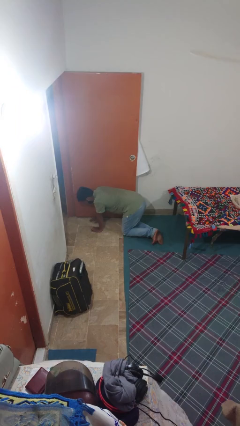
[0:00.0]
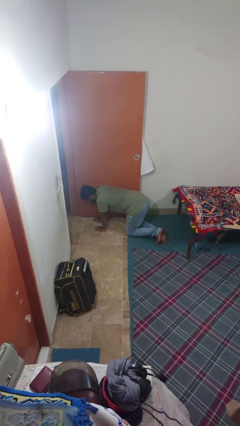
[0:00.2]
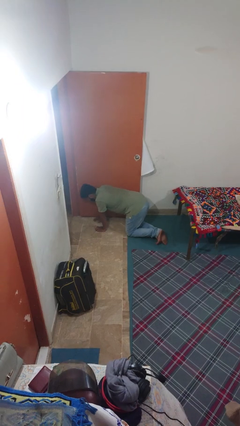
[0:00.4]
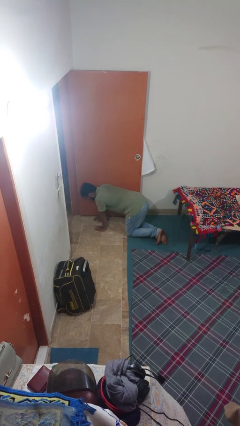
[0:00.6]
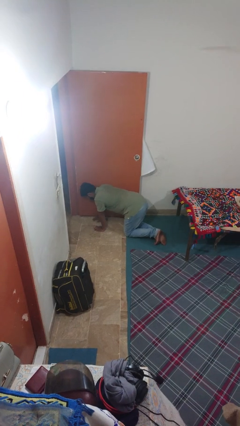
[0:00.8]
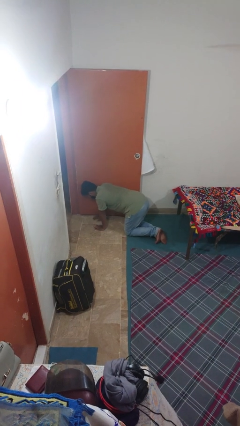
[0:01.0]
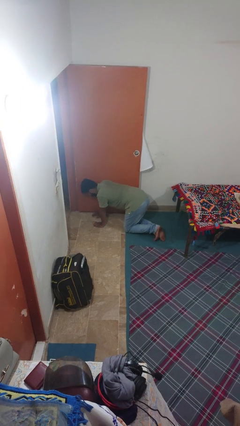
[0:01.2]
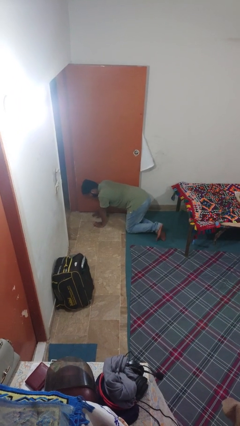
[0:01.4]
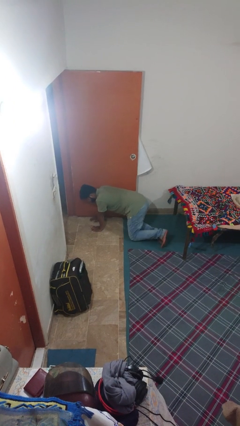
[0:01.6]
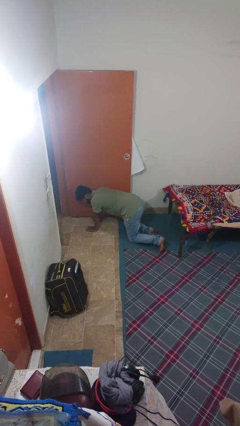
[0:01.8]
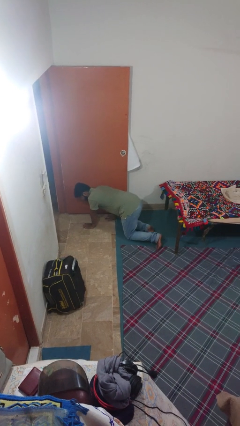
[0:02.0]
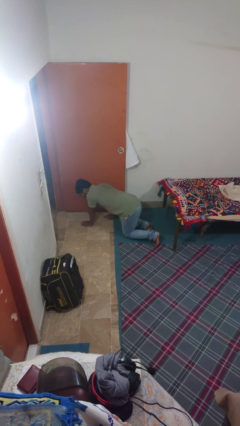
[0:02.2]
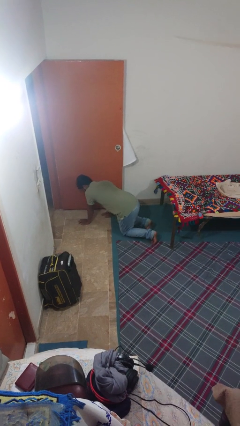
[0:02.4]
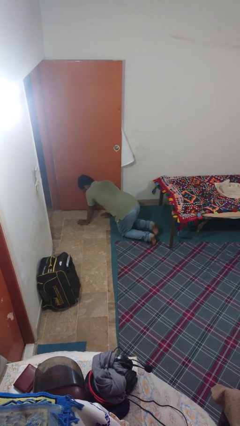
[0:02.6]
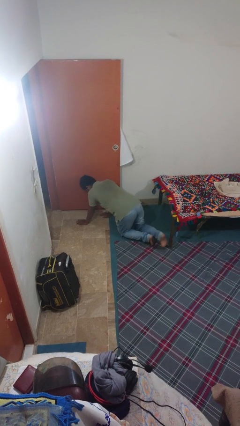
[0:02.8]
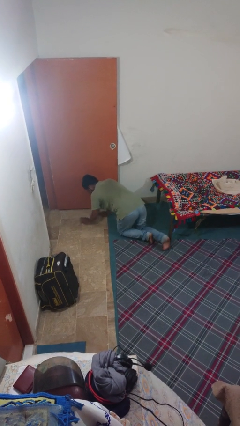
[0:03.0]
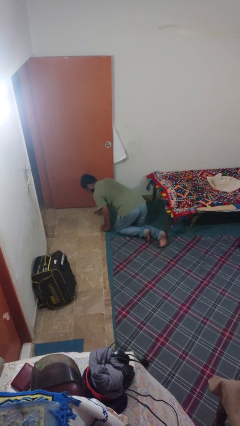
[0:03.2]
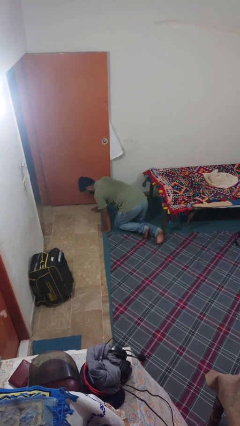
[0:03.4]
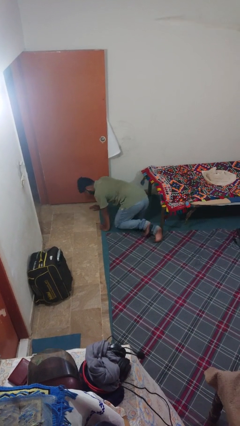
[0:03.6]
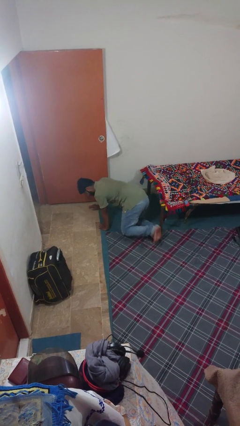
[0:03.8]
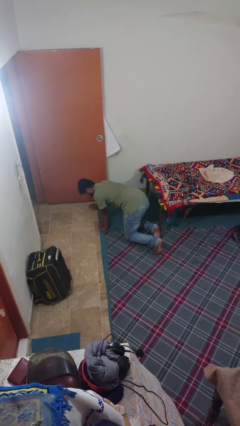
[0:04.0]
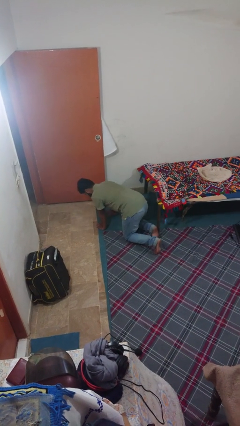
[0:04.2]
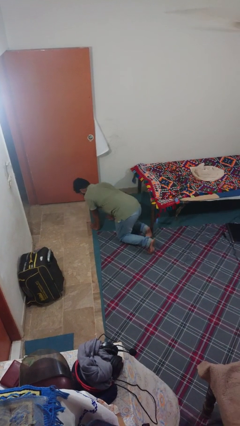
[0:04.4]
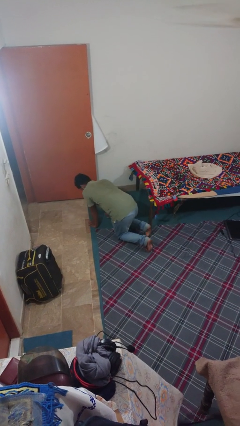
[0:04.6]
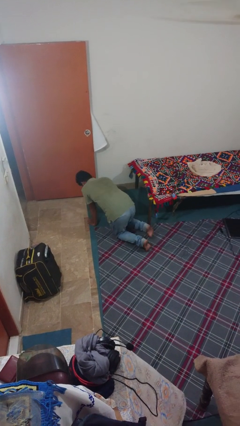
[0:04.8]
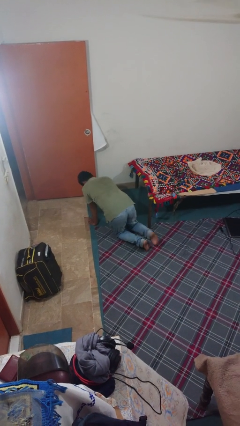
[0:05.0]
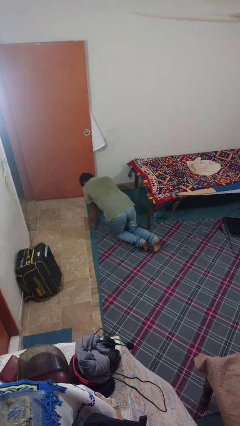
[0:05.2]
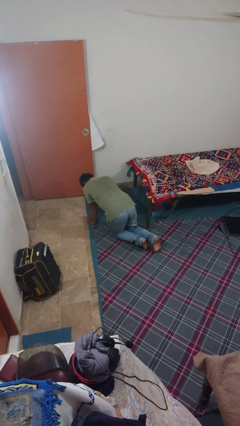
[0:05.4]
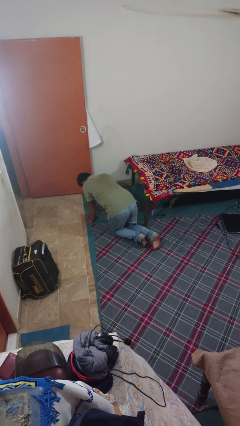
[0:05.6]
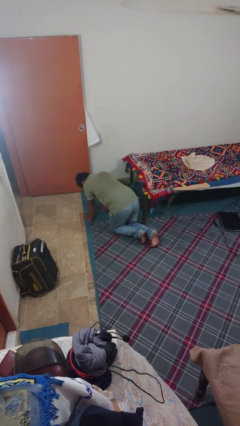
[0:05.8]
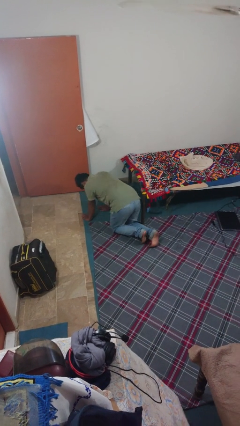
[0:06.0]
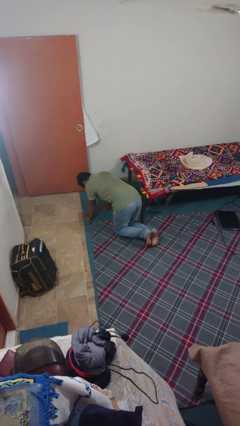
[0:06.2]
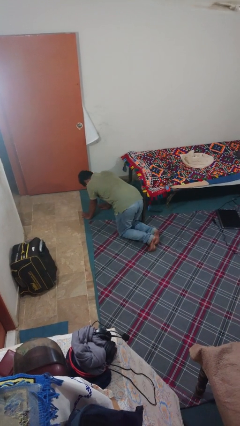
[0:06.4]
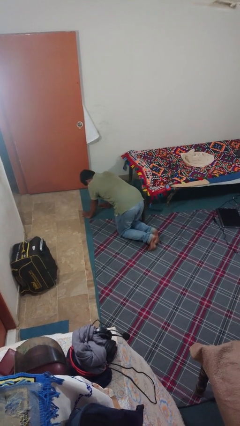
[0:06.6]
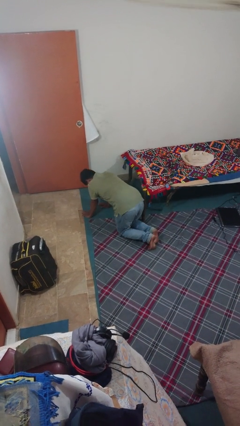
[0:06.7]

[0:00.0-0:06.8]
person crawls

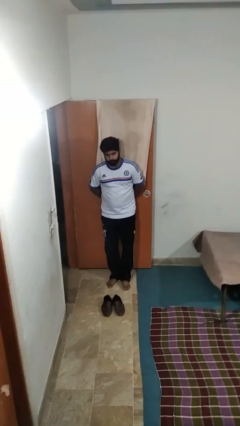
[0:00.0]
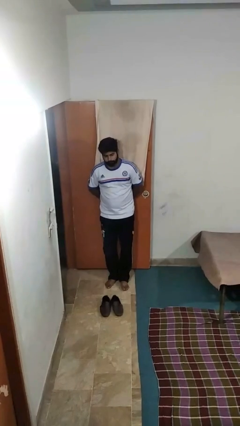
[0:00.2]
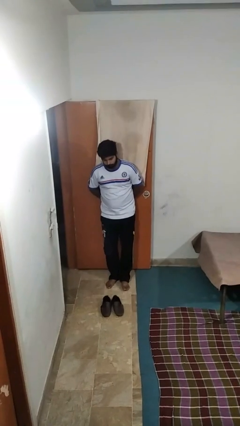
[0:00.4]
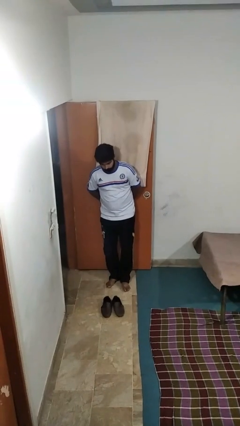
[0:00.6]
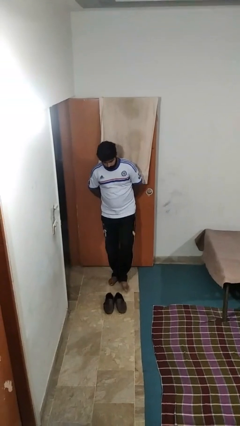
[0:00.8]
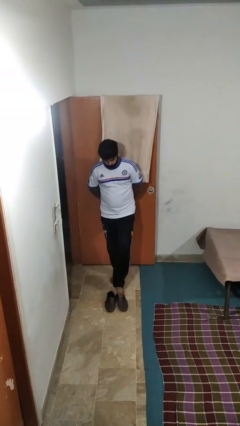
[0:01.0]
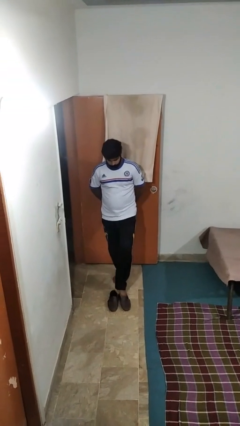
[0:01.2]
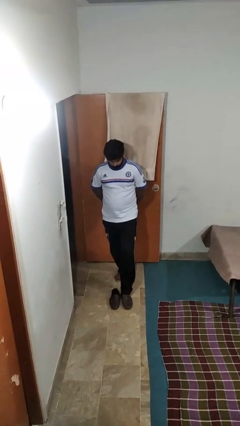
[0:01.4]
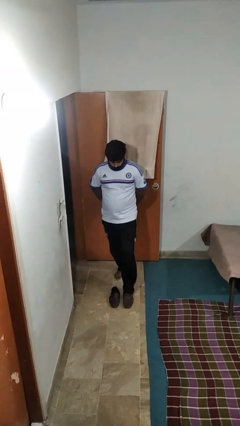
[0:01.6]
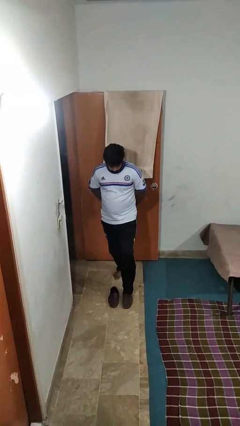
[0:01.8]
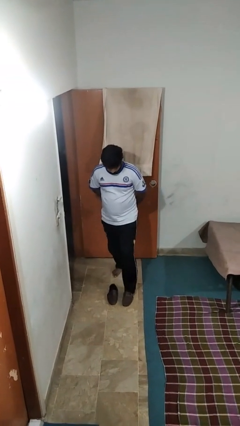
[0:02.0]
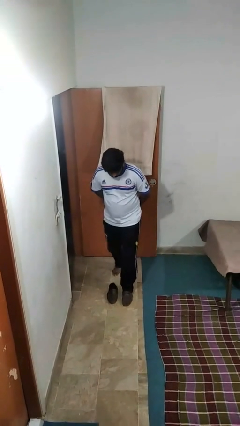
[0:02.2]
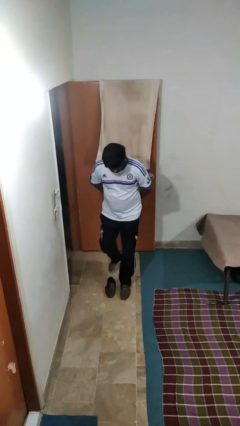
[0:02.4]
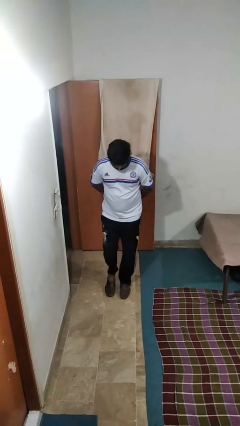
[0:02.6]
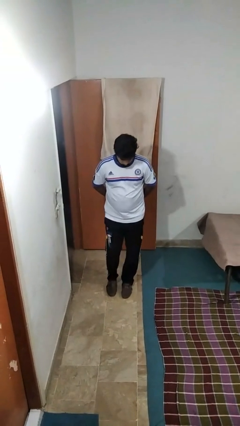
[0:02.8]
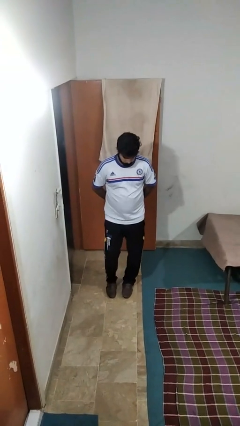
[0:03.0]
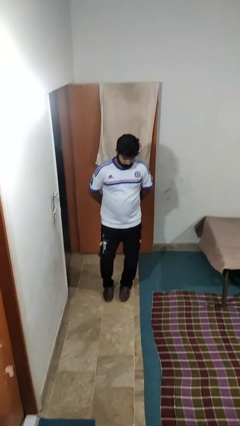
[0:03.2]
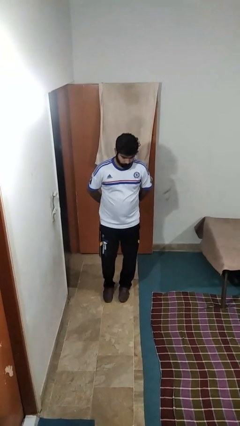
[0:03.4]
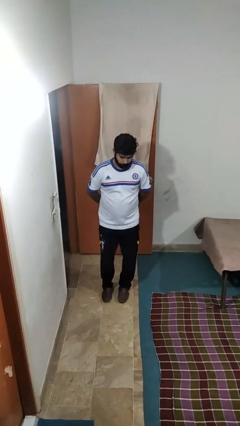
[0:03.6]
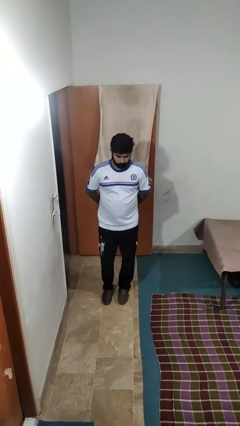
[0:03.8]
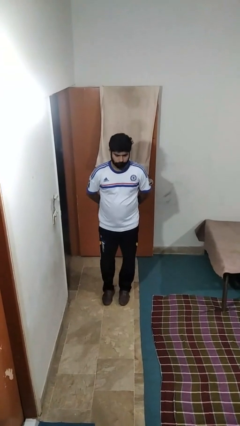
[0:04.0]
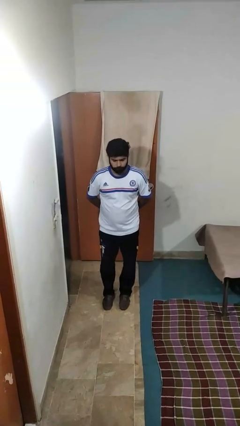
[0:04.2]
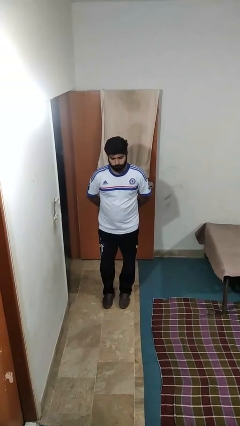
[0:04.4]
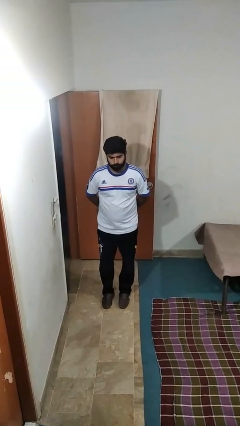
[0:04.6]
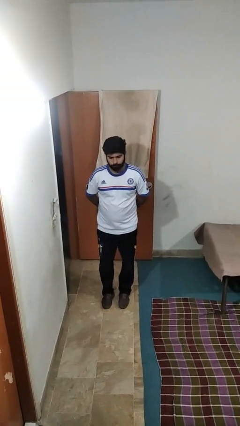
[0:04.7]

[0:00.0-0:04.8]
person puts on shoes

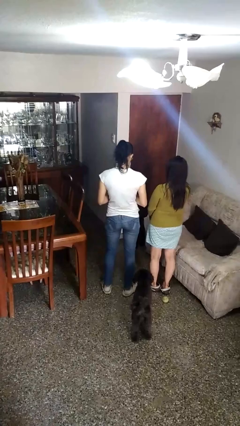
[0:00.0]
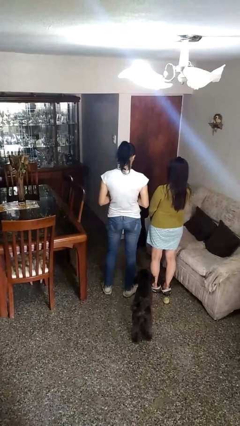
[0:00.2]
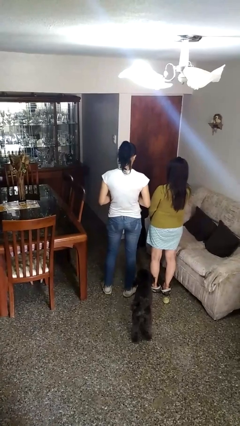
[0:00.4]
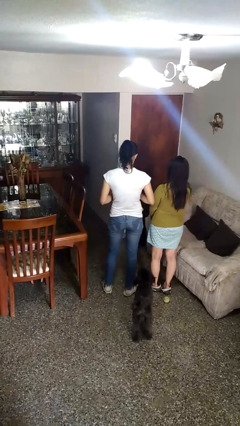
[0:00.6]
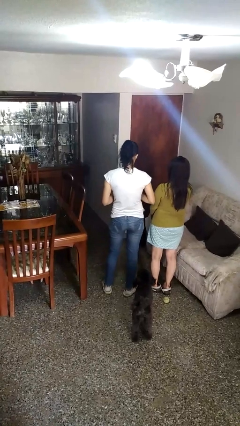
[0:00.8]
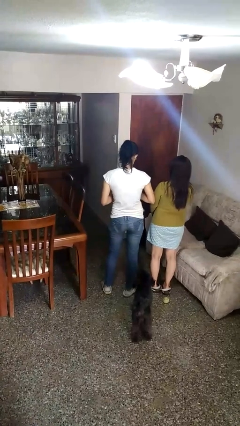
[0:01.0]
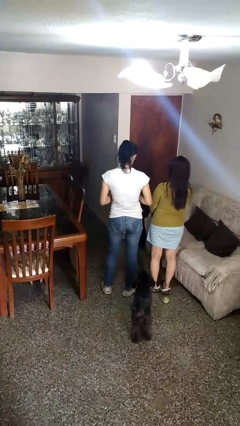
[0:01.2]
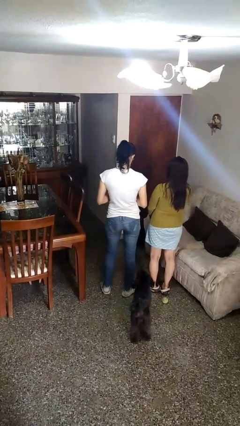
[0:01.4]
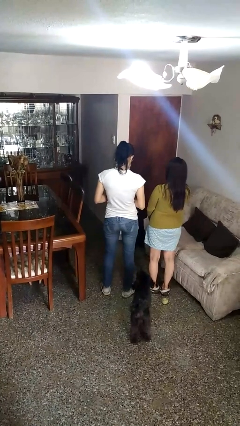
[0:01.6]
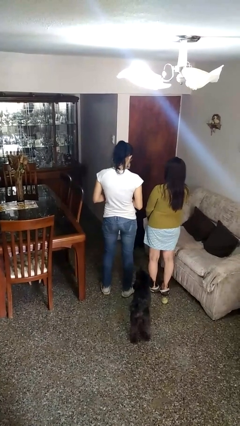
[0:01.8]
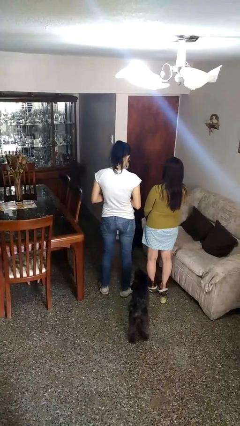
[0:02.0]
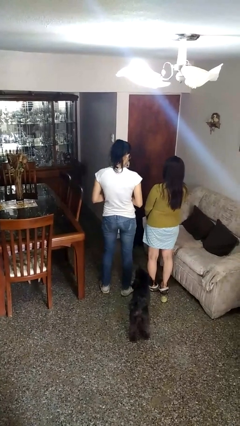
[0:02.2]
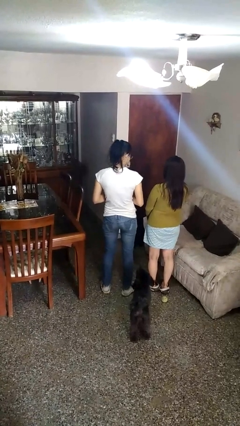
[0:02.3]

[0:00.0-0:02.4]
person nudges person with elbow

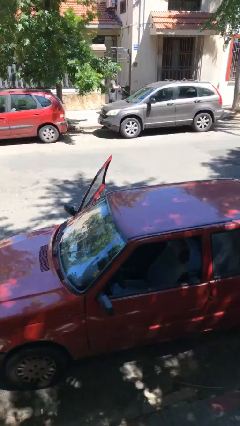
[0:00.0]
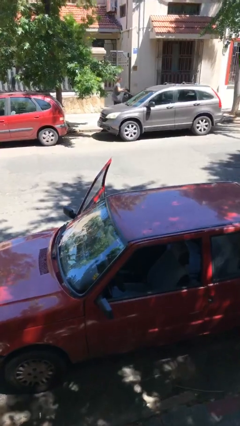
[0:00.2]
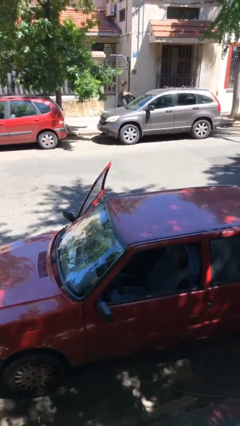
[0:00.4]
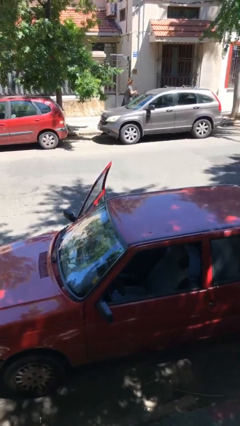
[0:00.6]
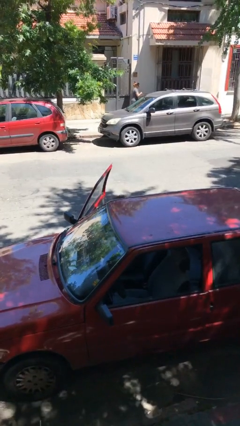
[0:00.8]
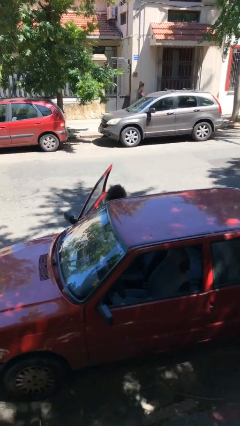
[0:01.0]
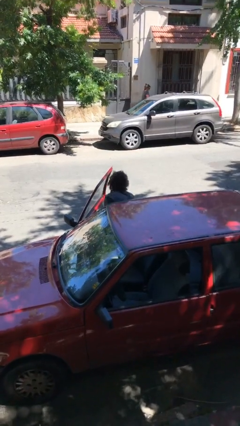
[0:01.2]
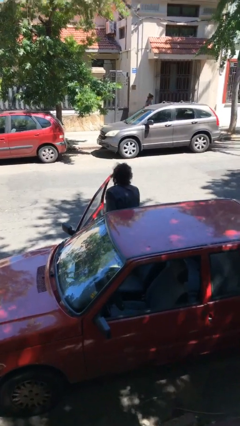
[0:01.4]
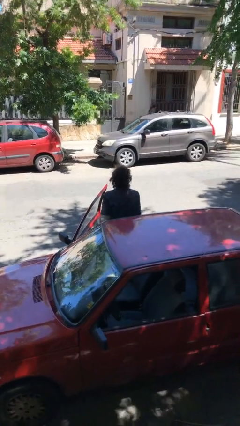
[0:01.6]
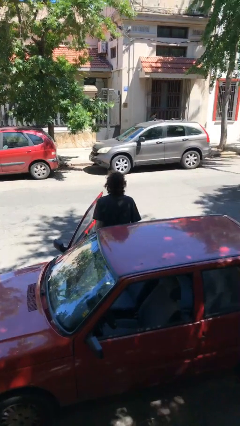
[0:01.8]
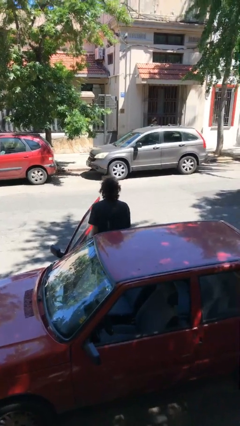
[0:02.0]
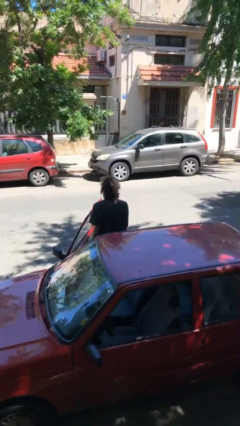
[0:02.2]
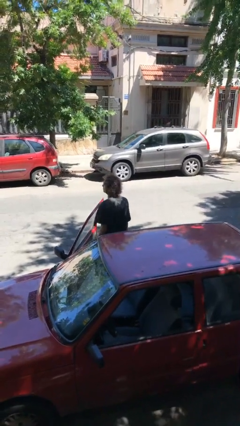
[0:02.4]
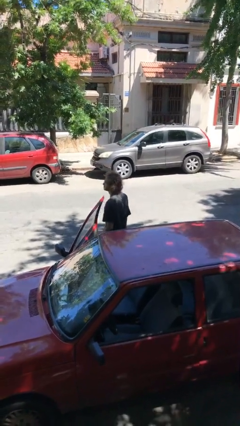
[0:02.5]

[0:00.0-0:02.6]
person exits car

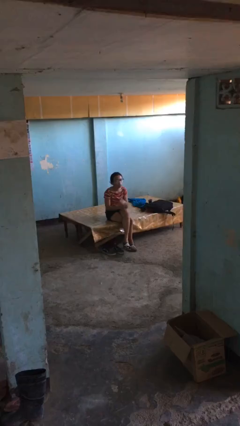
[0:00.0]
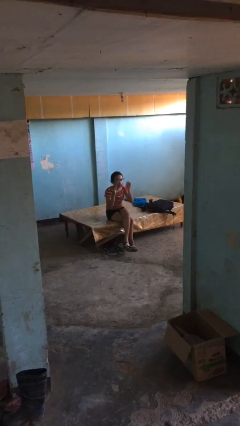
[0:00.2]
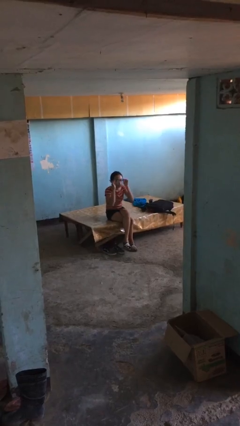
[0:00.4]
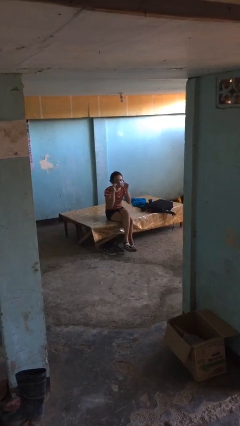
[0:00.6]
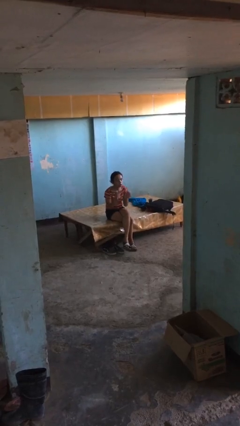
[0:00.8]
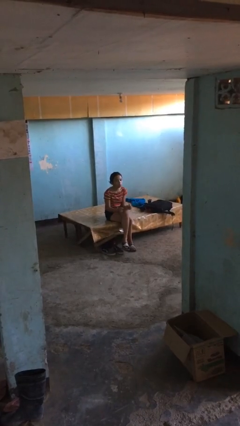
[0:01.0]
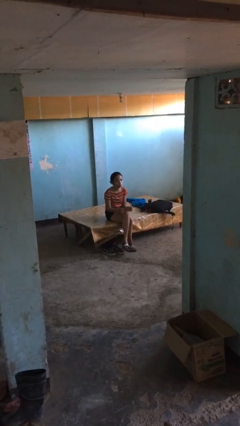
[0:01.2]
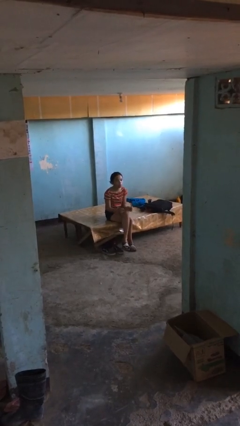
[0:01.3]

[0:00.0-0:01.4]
person takes off glasses

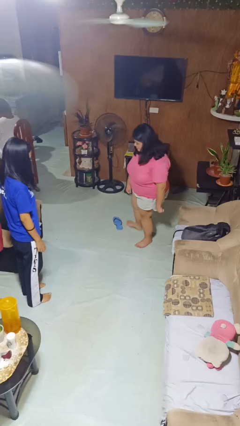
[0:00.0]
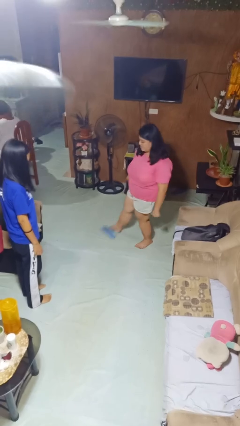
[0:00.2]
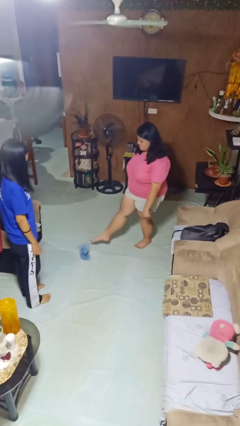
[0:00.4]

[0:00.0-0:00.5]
person kicks object to person
